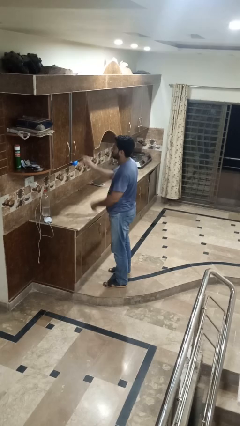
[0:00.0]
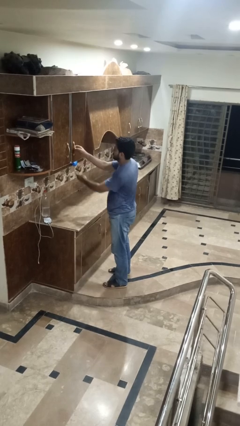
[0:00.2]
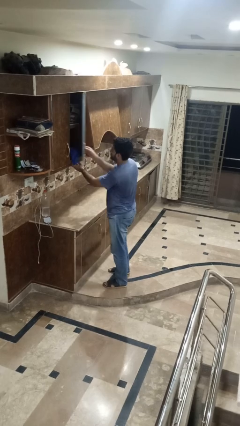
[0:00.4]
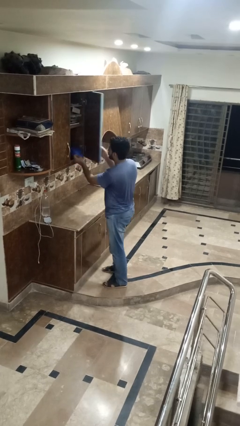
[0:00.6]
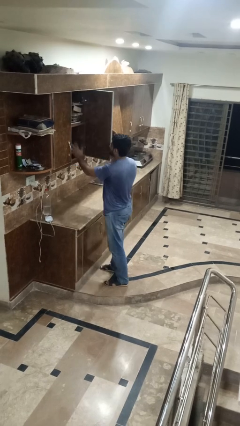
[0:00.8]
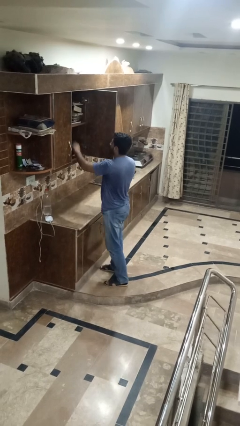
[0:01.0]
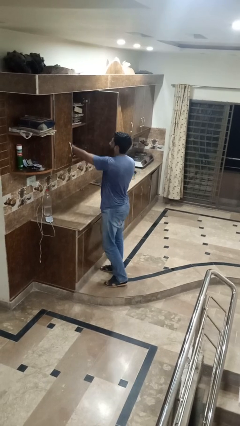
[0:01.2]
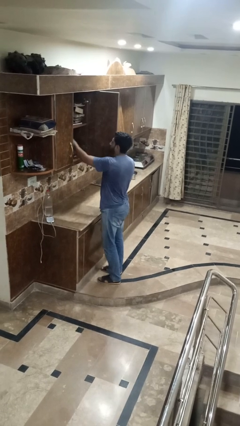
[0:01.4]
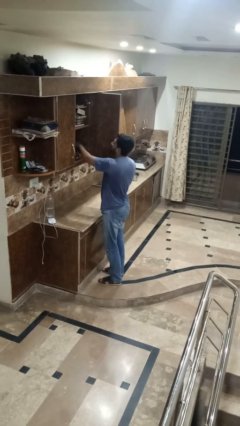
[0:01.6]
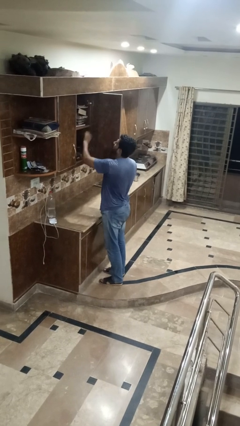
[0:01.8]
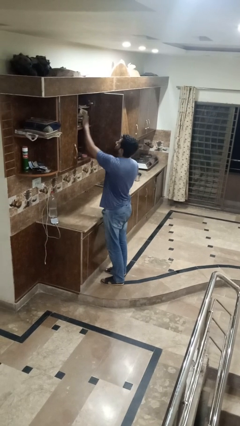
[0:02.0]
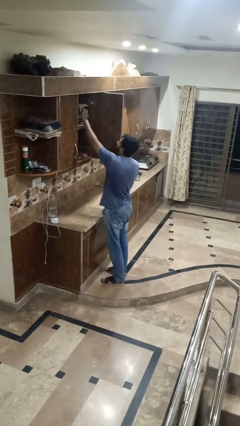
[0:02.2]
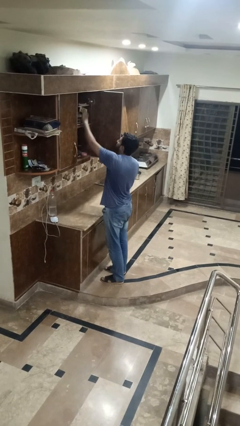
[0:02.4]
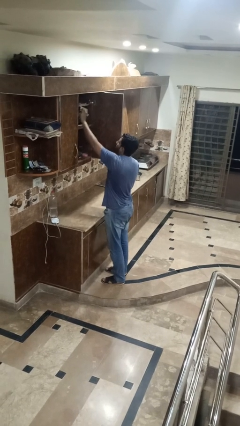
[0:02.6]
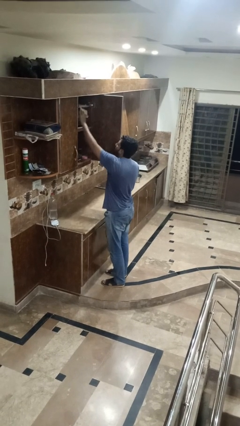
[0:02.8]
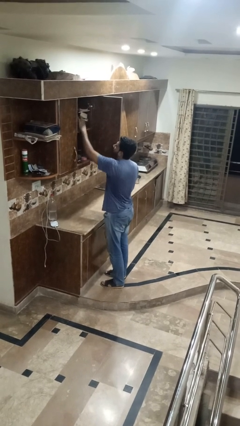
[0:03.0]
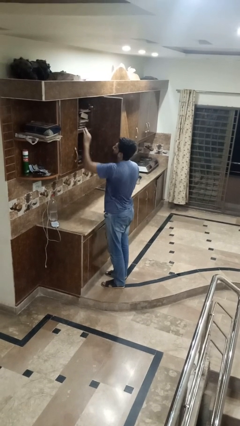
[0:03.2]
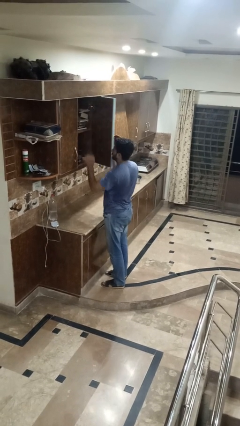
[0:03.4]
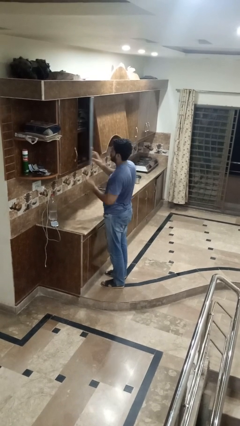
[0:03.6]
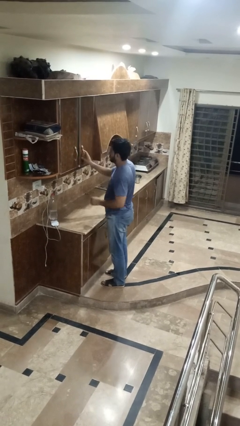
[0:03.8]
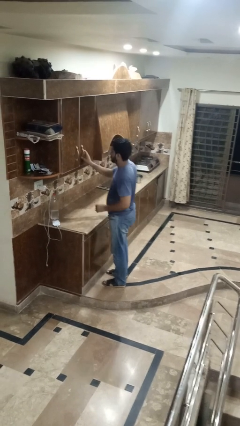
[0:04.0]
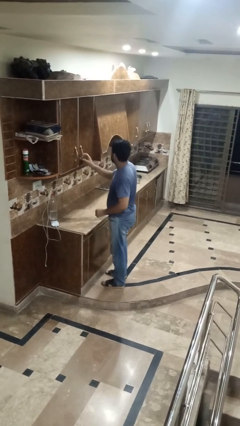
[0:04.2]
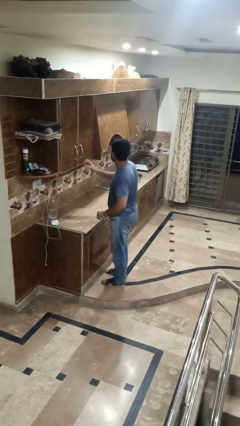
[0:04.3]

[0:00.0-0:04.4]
person searches in cabinet

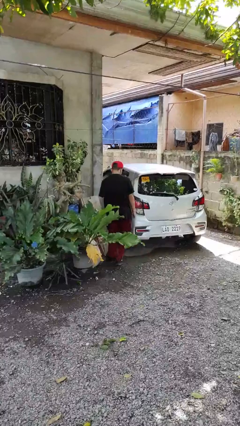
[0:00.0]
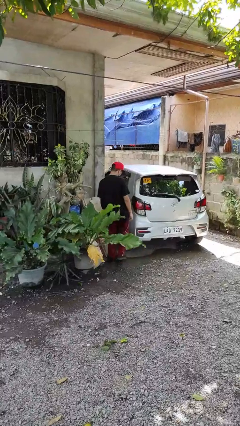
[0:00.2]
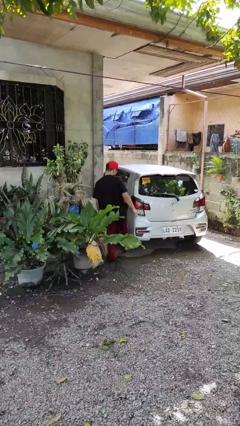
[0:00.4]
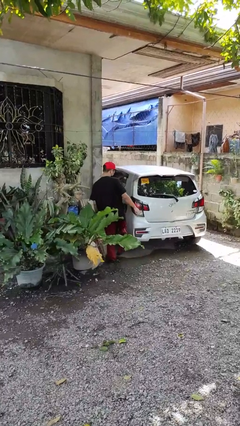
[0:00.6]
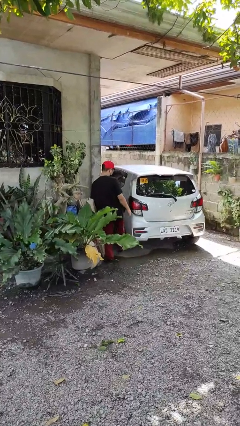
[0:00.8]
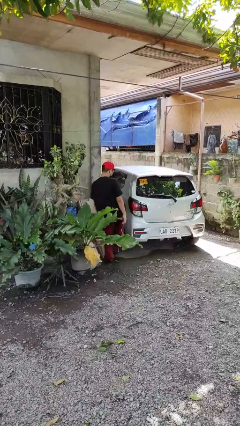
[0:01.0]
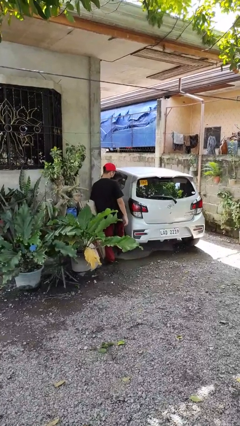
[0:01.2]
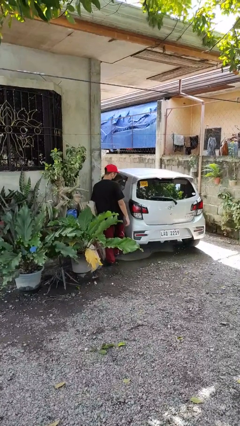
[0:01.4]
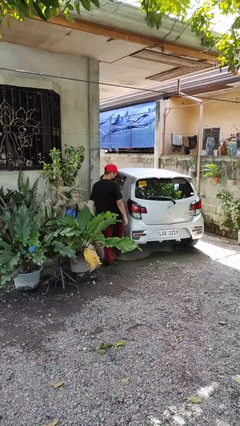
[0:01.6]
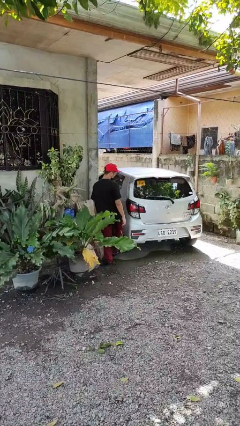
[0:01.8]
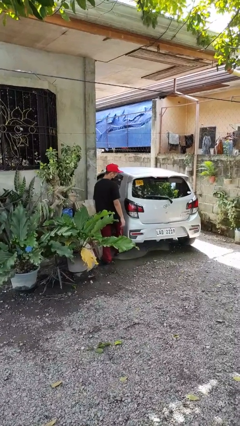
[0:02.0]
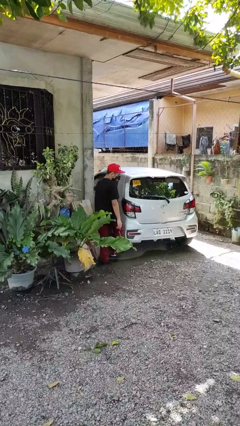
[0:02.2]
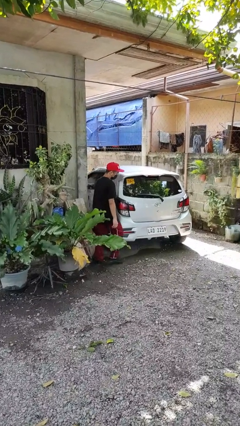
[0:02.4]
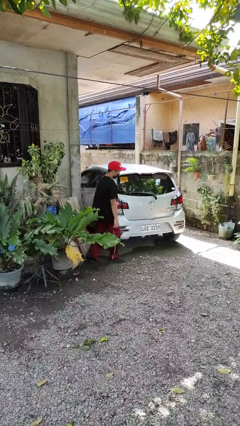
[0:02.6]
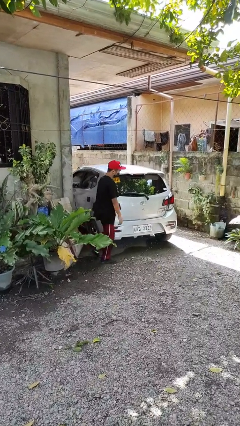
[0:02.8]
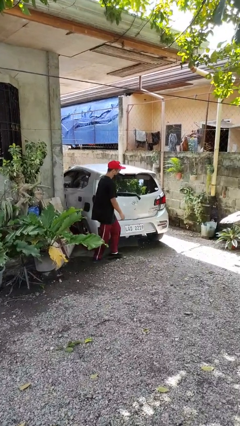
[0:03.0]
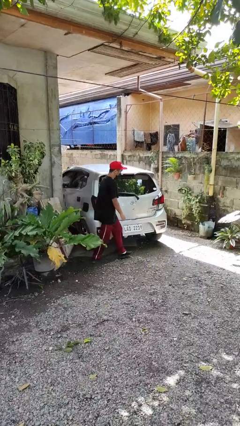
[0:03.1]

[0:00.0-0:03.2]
person kicks car tires

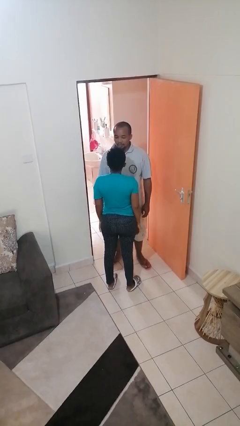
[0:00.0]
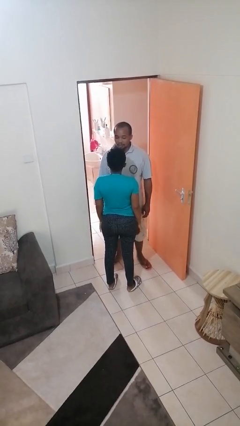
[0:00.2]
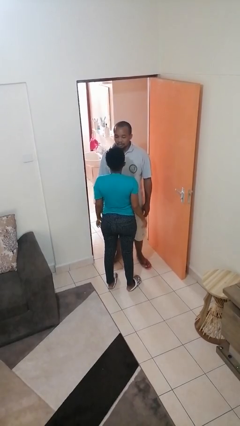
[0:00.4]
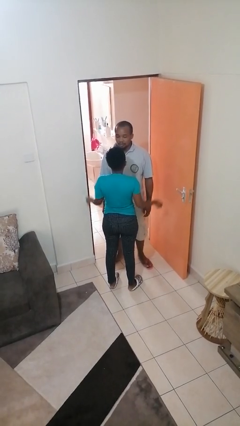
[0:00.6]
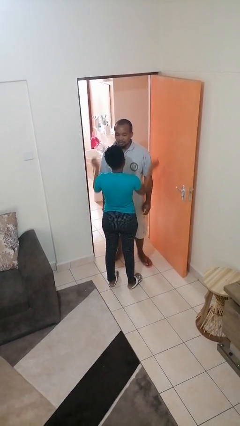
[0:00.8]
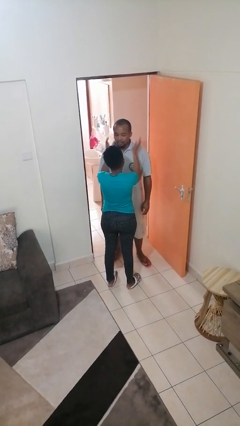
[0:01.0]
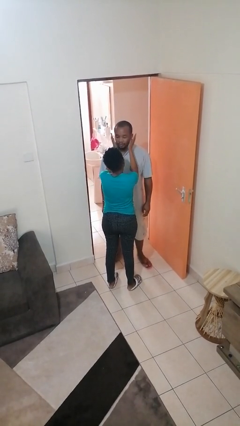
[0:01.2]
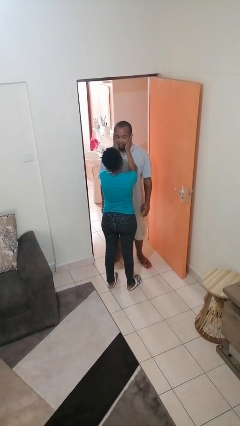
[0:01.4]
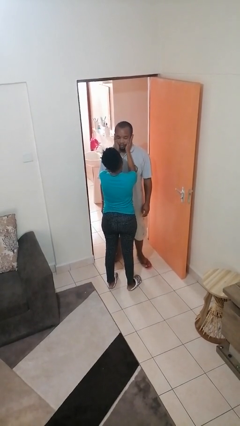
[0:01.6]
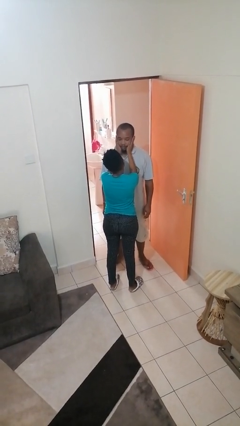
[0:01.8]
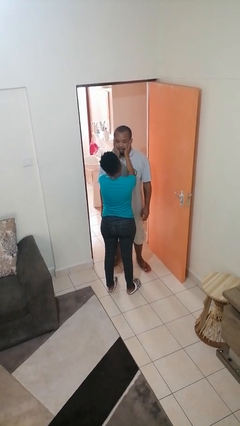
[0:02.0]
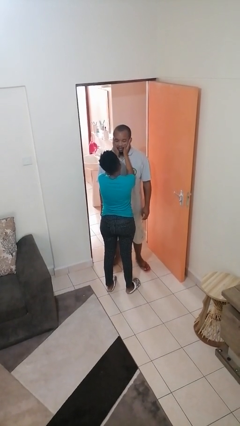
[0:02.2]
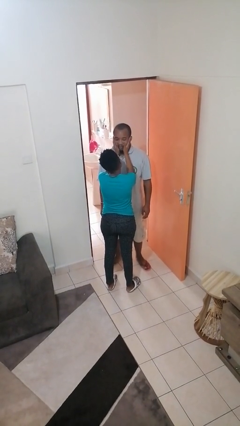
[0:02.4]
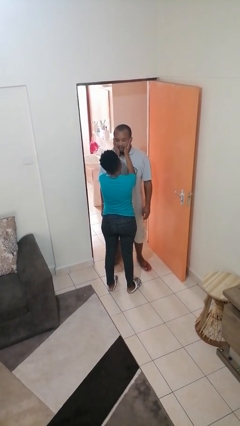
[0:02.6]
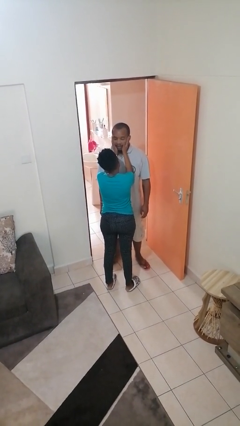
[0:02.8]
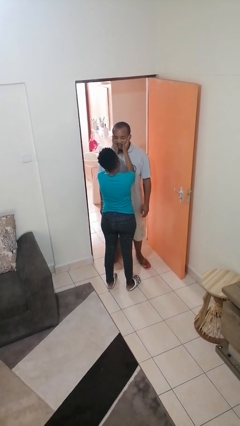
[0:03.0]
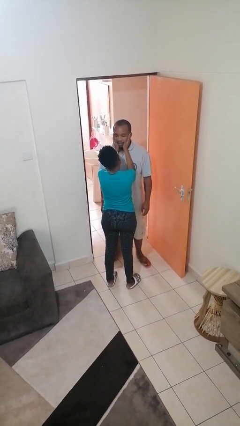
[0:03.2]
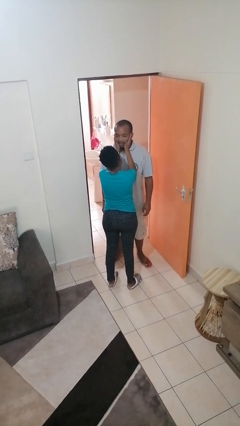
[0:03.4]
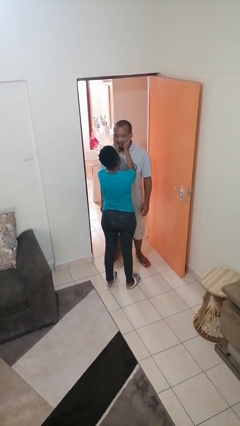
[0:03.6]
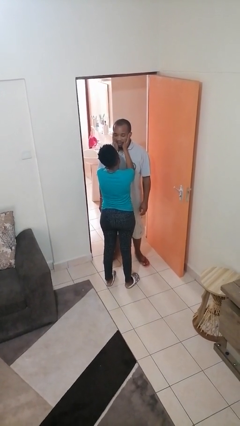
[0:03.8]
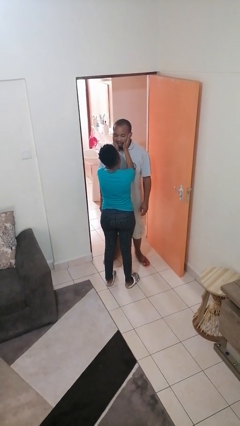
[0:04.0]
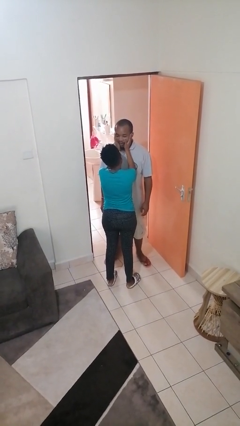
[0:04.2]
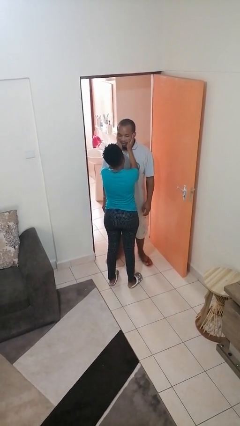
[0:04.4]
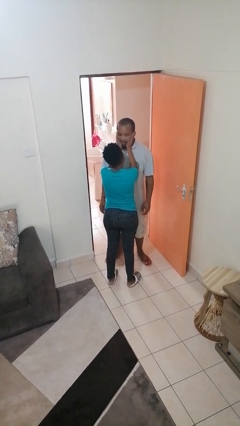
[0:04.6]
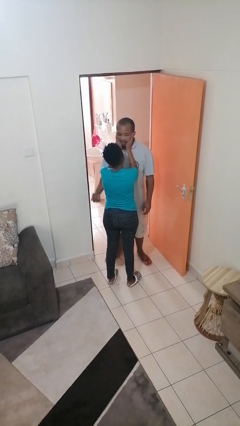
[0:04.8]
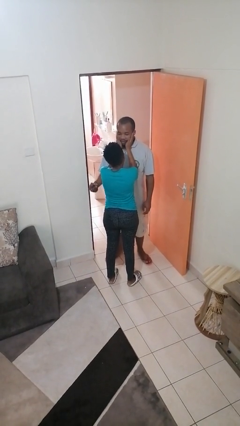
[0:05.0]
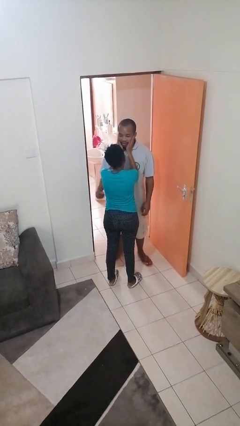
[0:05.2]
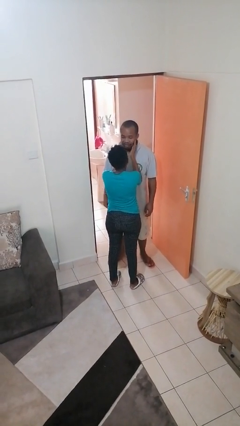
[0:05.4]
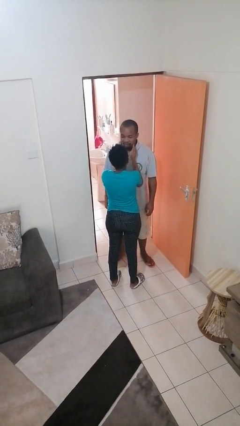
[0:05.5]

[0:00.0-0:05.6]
person touches face of person

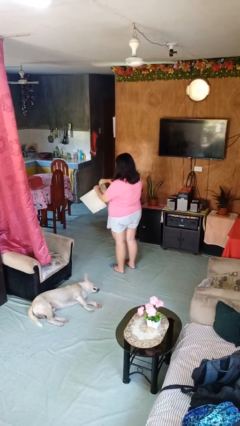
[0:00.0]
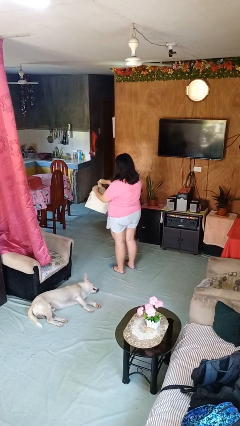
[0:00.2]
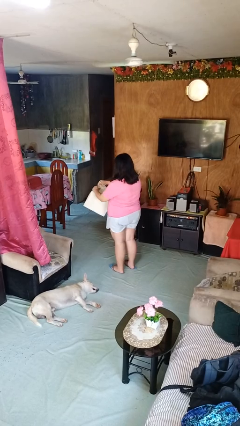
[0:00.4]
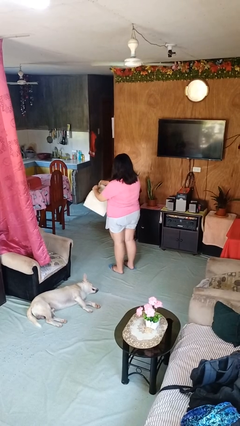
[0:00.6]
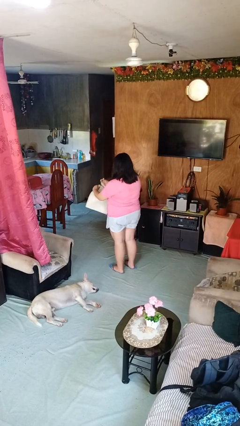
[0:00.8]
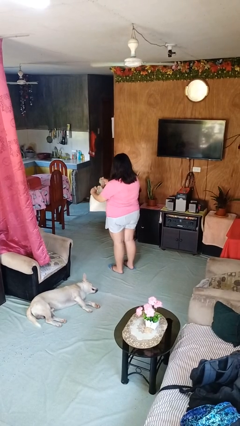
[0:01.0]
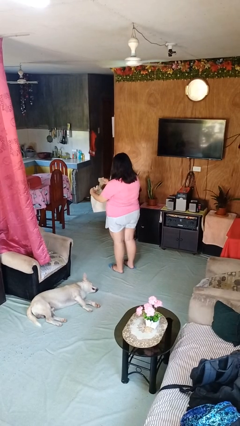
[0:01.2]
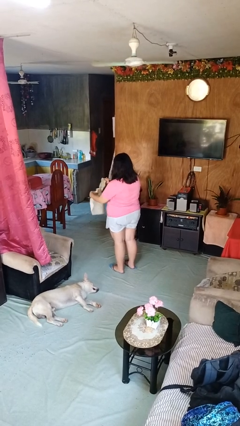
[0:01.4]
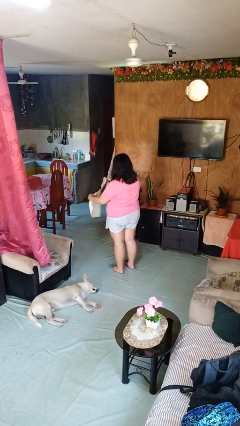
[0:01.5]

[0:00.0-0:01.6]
person tears paper

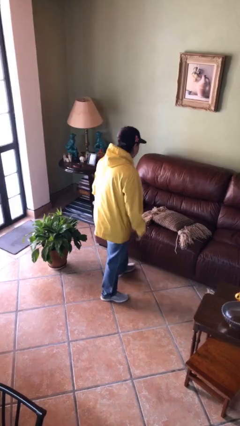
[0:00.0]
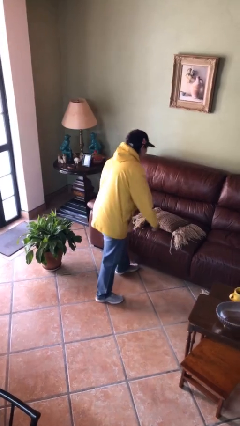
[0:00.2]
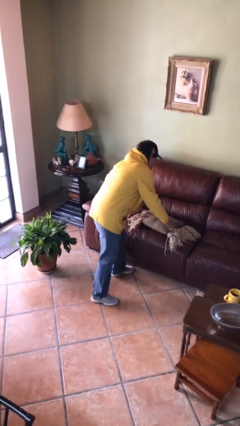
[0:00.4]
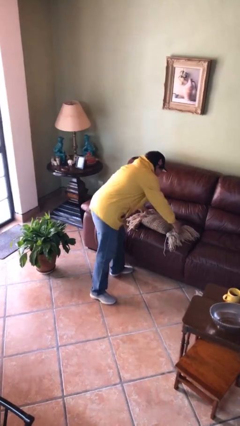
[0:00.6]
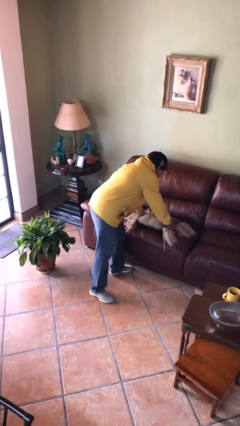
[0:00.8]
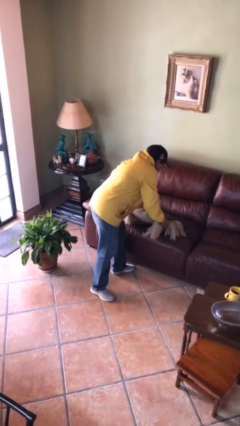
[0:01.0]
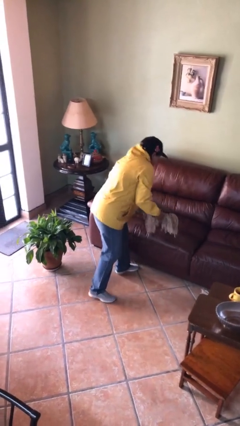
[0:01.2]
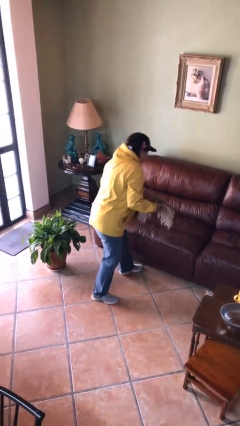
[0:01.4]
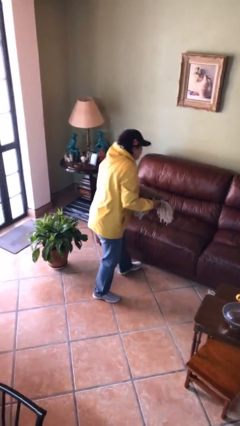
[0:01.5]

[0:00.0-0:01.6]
person picks up object from couch

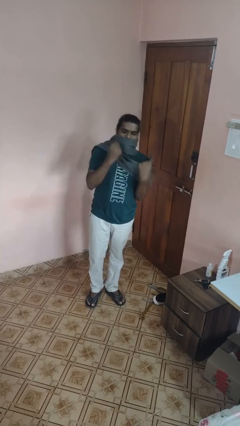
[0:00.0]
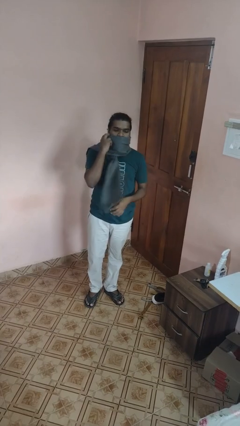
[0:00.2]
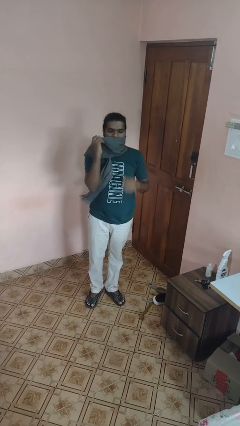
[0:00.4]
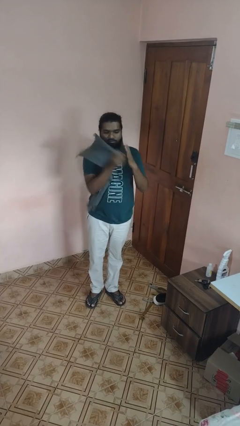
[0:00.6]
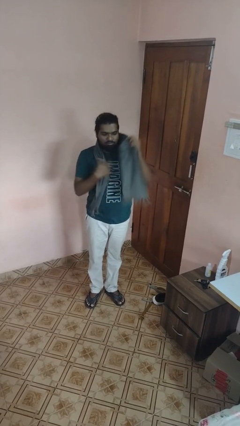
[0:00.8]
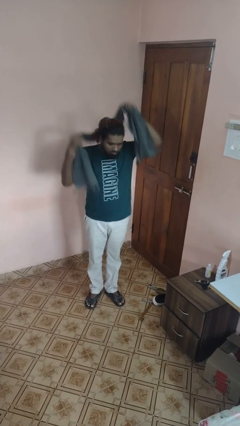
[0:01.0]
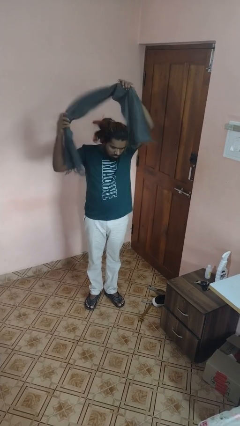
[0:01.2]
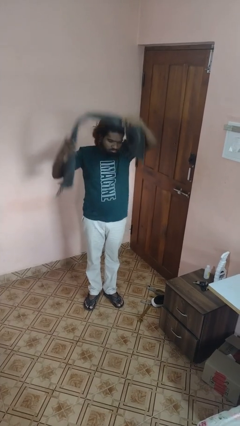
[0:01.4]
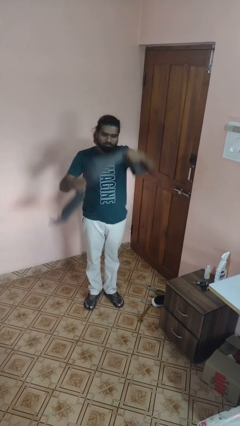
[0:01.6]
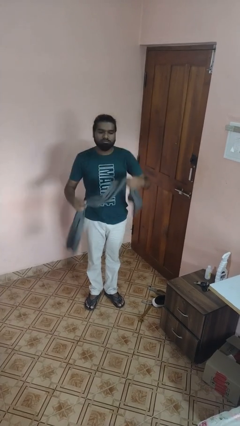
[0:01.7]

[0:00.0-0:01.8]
person takes off scarf
